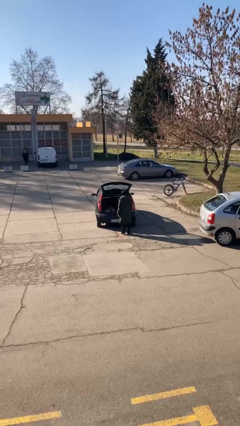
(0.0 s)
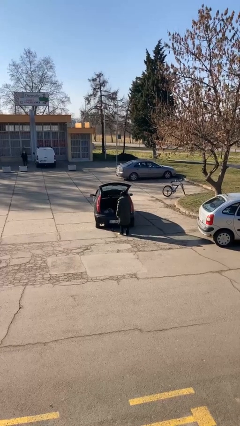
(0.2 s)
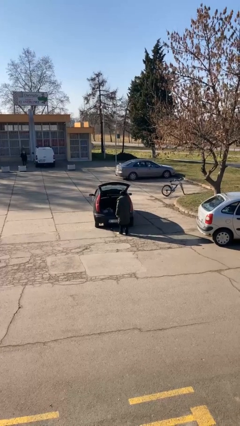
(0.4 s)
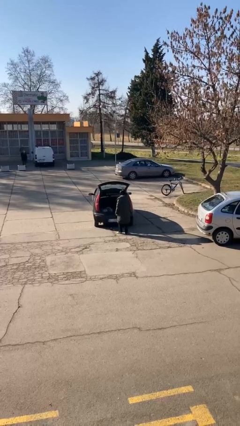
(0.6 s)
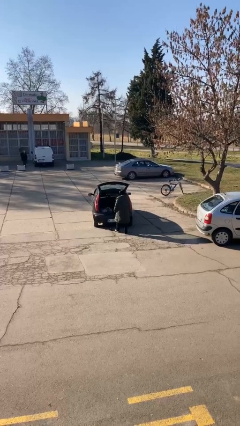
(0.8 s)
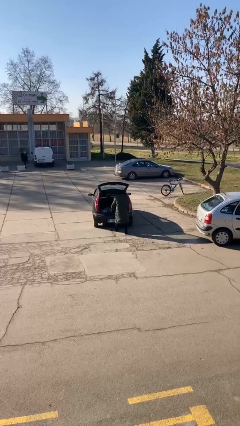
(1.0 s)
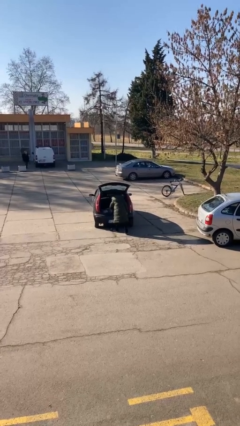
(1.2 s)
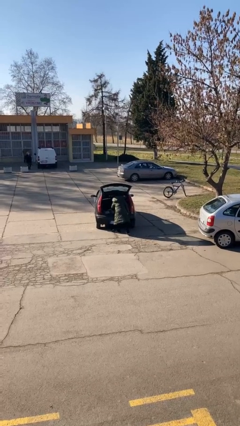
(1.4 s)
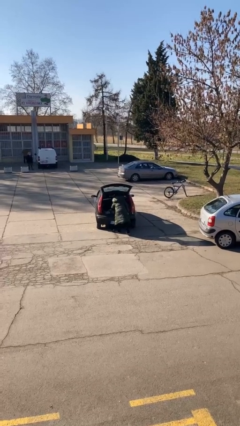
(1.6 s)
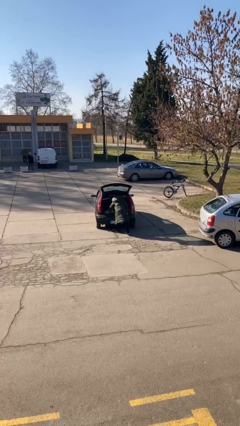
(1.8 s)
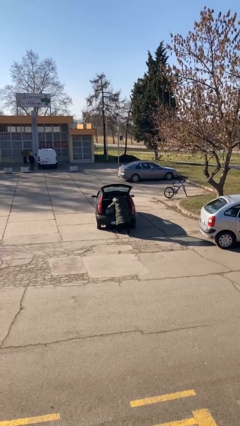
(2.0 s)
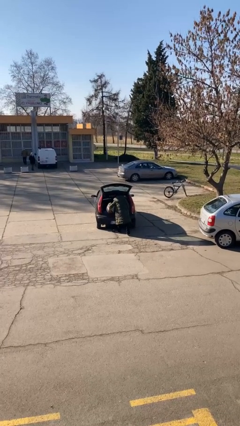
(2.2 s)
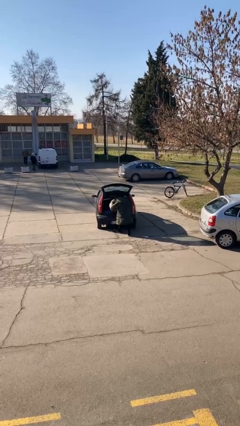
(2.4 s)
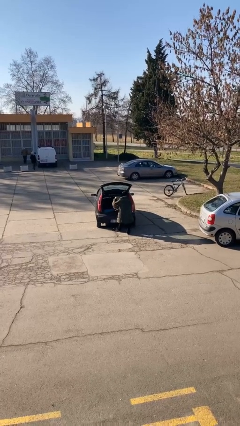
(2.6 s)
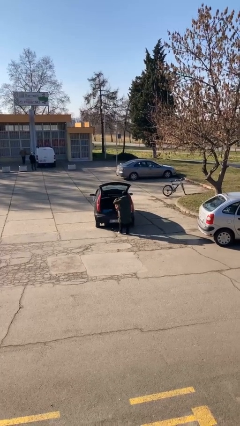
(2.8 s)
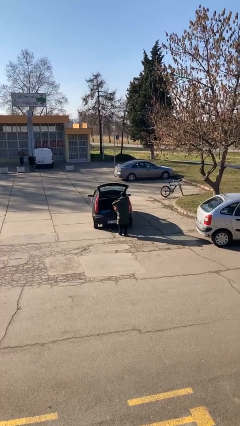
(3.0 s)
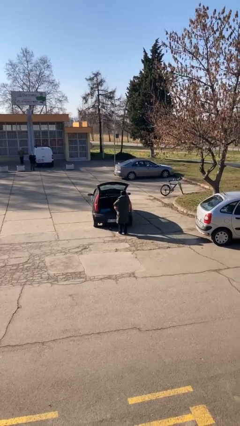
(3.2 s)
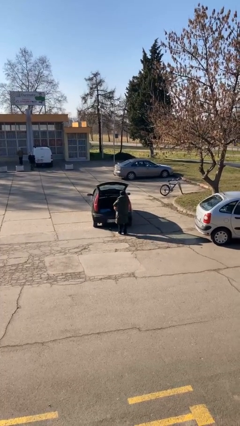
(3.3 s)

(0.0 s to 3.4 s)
person unloads car

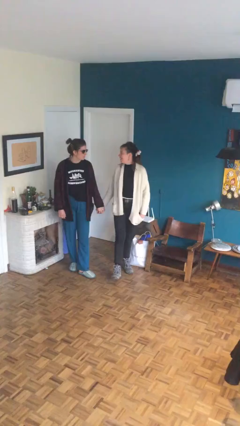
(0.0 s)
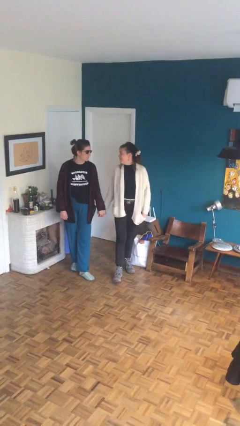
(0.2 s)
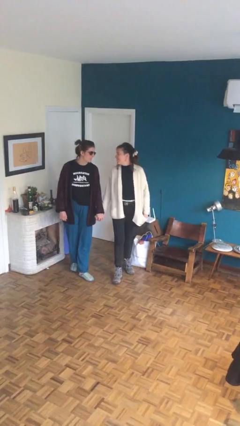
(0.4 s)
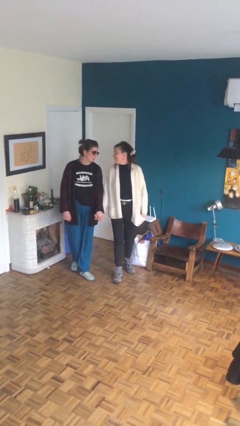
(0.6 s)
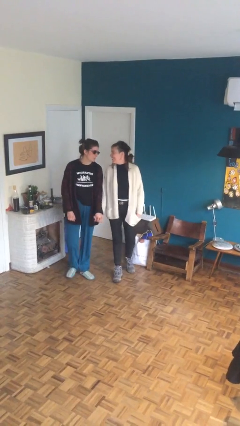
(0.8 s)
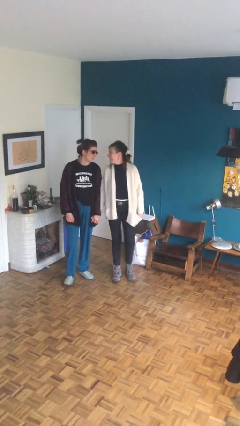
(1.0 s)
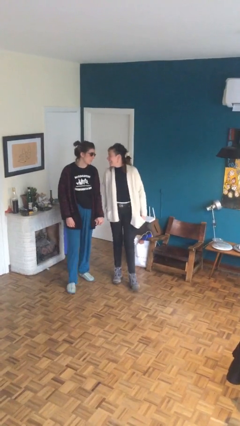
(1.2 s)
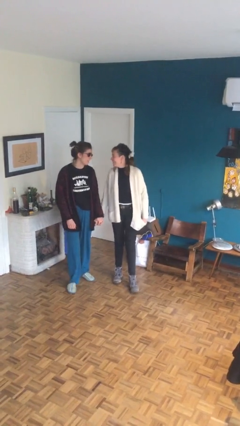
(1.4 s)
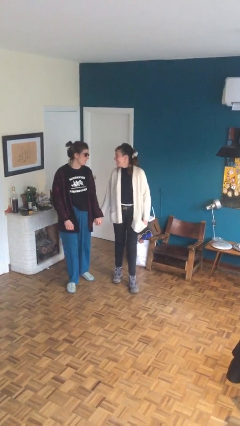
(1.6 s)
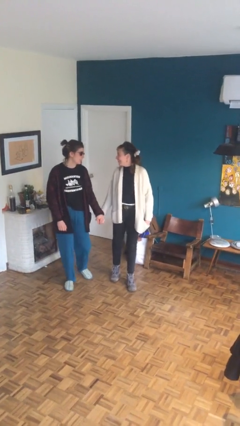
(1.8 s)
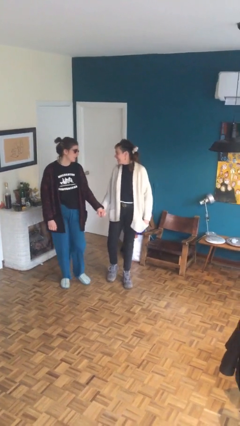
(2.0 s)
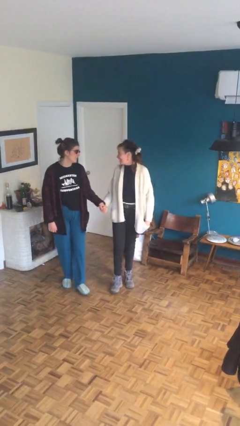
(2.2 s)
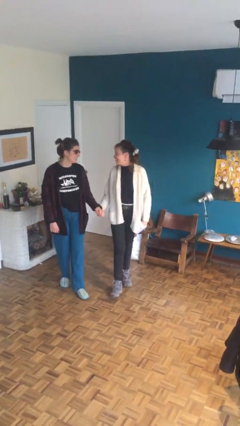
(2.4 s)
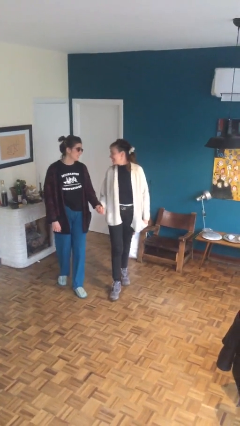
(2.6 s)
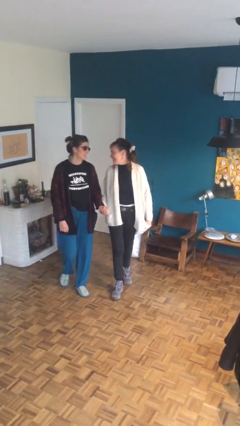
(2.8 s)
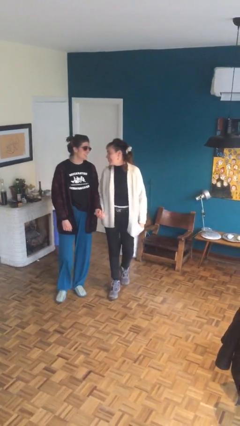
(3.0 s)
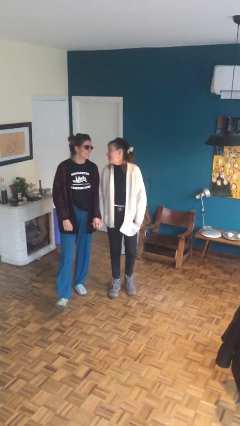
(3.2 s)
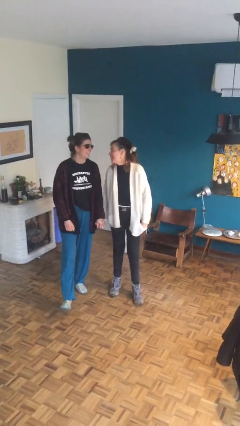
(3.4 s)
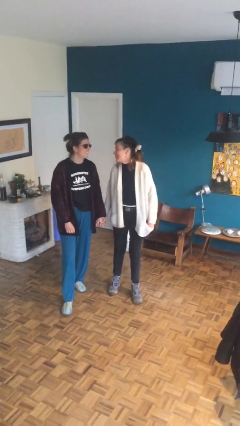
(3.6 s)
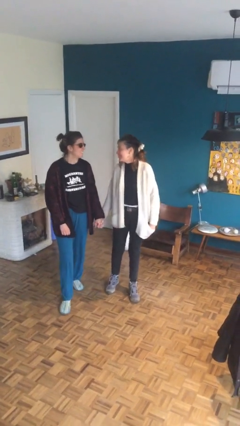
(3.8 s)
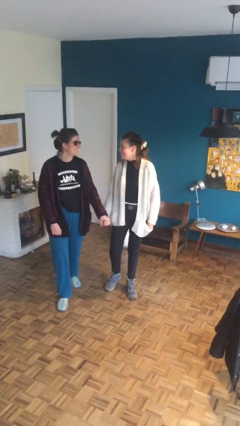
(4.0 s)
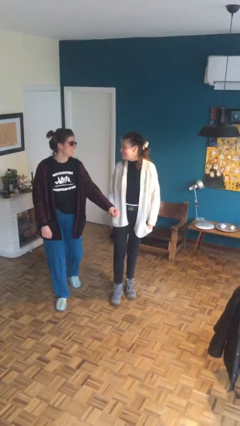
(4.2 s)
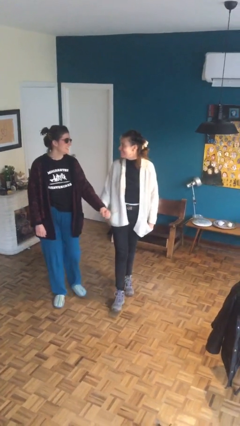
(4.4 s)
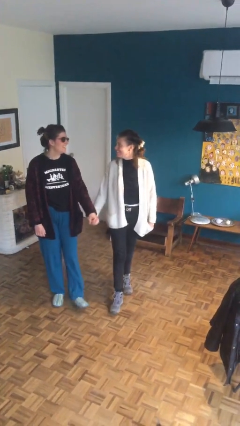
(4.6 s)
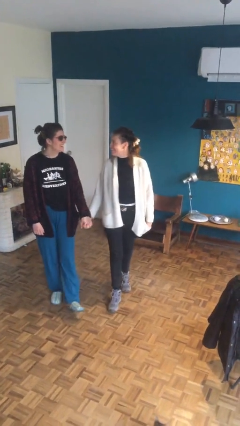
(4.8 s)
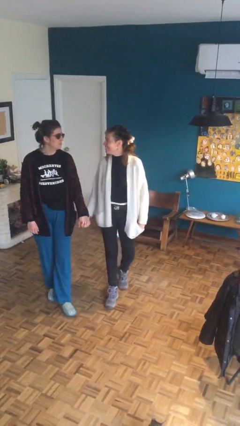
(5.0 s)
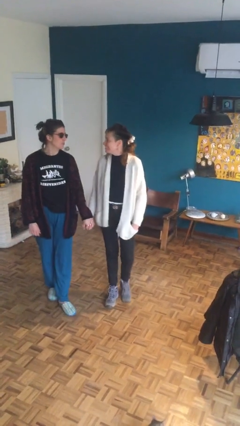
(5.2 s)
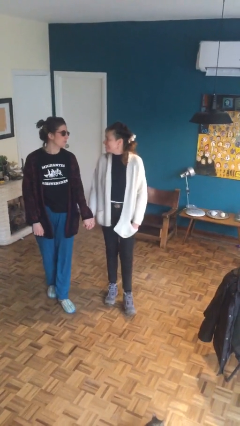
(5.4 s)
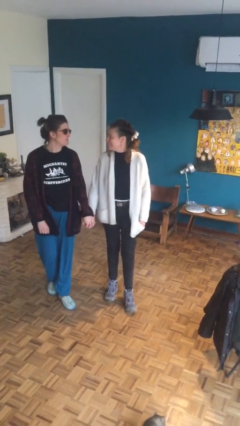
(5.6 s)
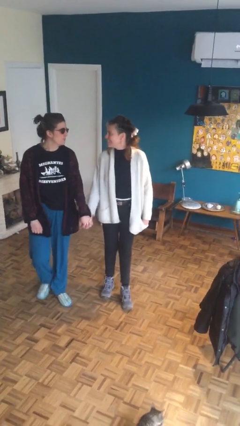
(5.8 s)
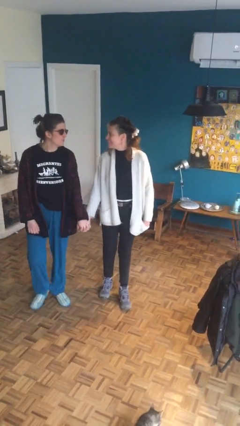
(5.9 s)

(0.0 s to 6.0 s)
person holds hand

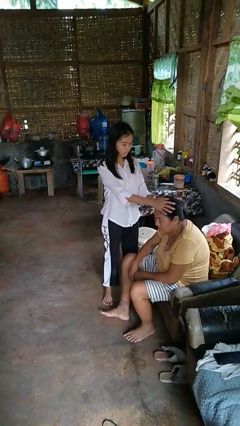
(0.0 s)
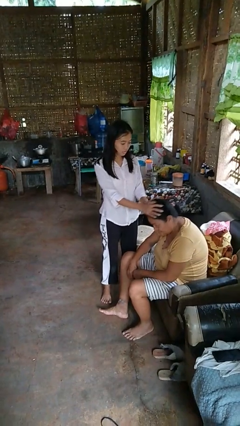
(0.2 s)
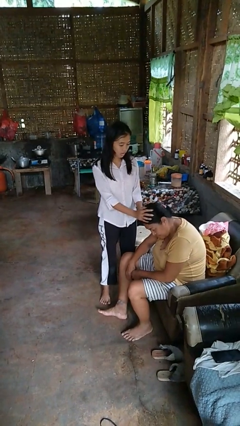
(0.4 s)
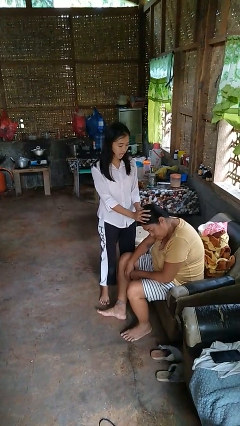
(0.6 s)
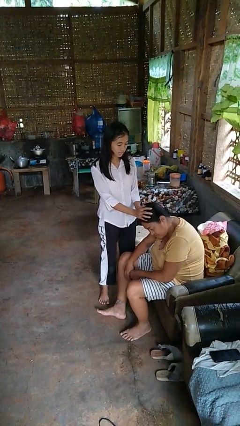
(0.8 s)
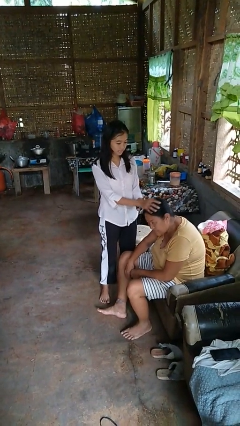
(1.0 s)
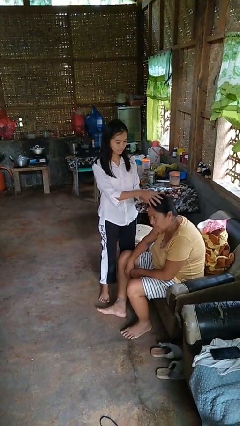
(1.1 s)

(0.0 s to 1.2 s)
person grabs person by hair

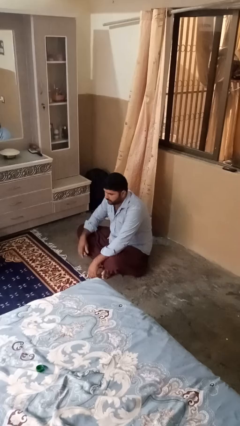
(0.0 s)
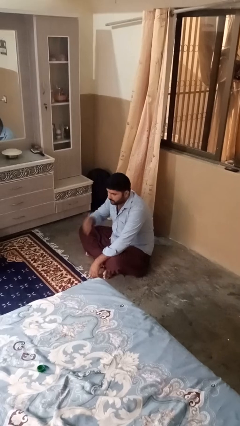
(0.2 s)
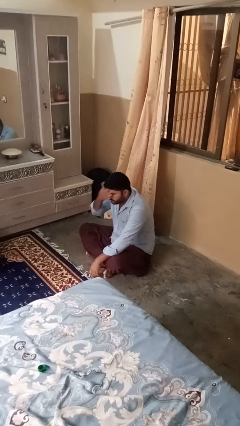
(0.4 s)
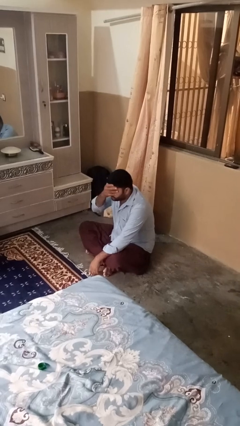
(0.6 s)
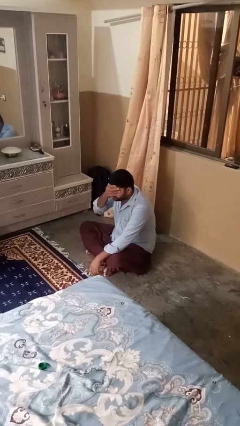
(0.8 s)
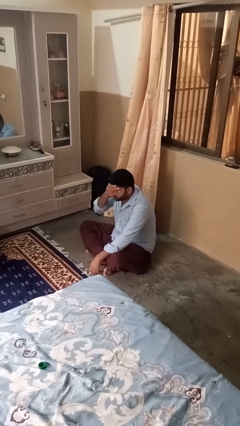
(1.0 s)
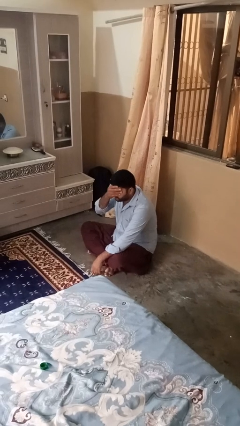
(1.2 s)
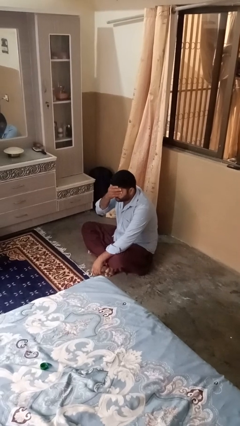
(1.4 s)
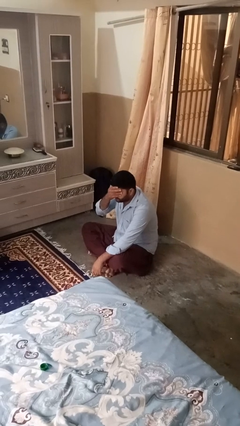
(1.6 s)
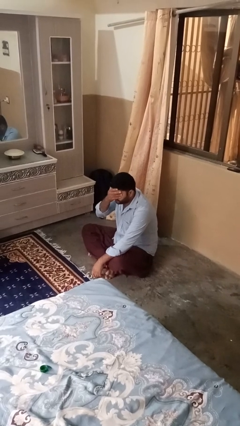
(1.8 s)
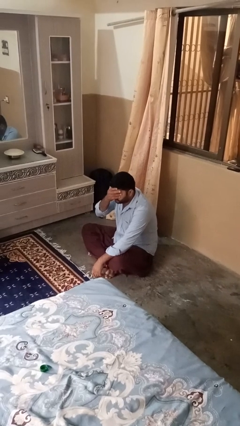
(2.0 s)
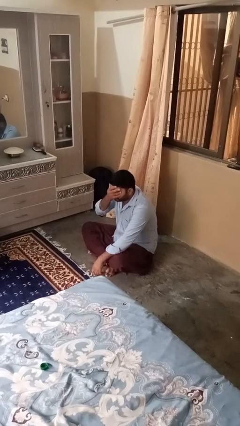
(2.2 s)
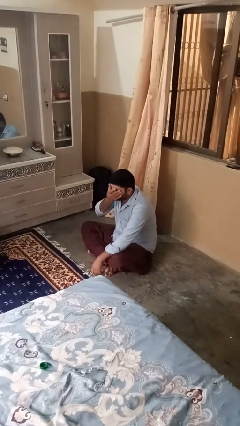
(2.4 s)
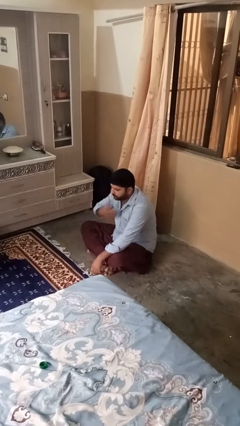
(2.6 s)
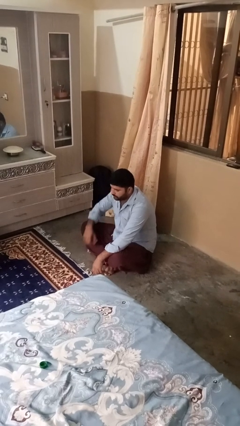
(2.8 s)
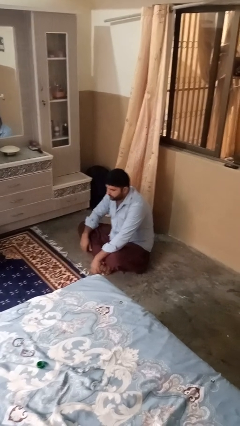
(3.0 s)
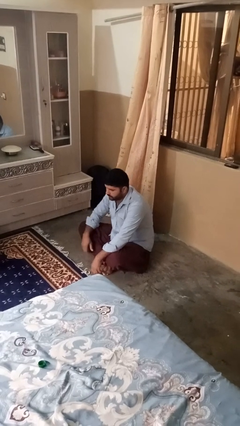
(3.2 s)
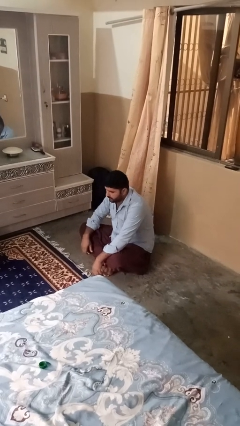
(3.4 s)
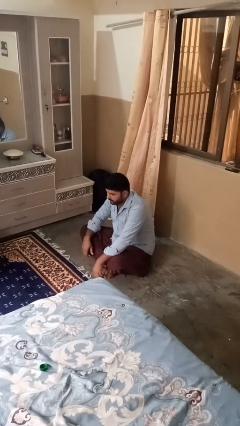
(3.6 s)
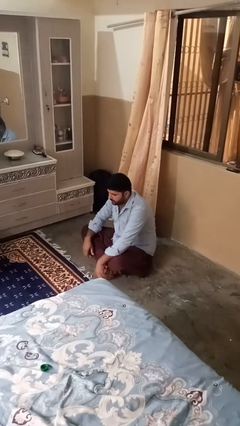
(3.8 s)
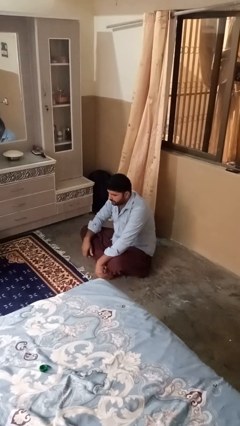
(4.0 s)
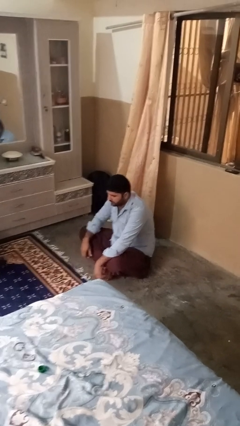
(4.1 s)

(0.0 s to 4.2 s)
person covers face with hands

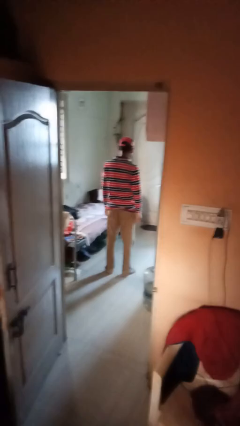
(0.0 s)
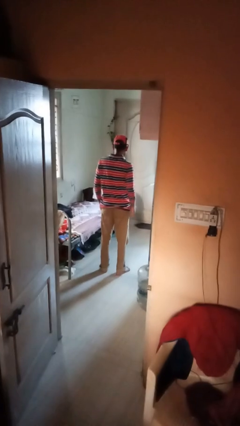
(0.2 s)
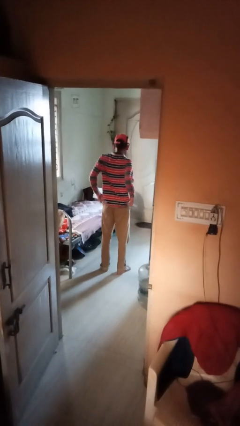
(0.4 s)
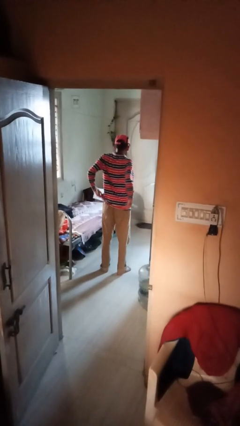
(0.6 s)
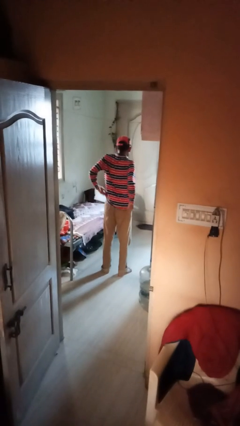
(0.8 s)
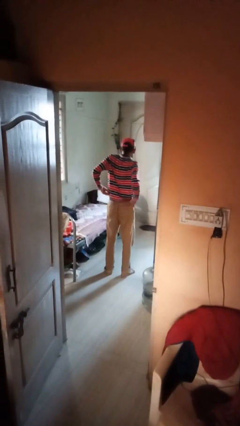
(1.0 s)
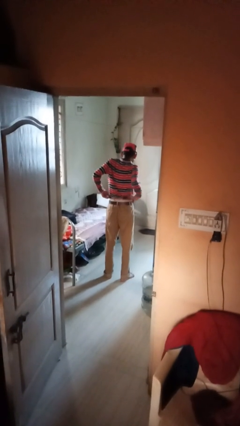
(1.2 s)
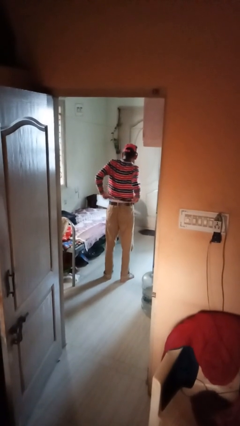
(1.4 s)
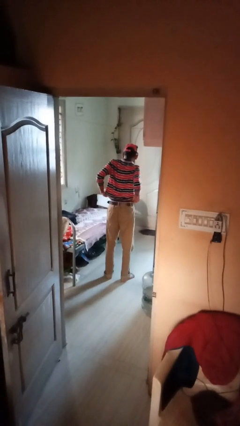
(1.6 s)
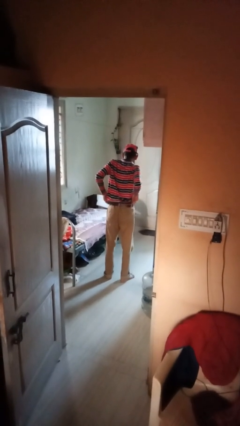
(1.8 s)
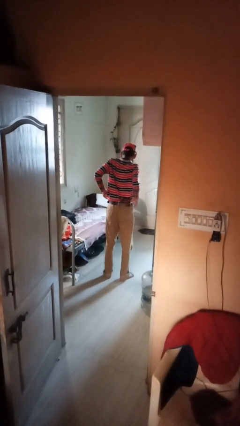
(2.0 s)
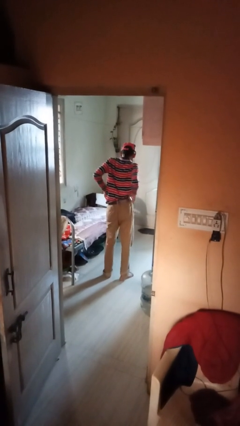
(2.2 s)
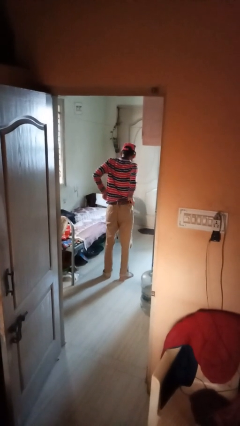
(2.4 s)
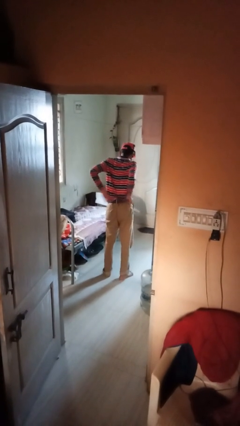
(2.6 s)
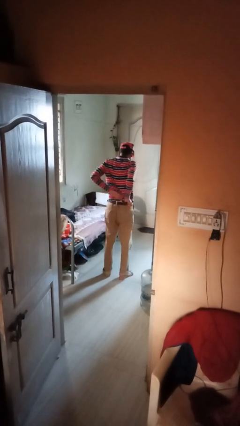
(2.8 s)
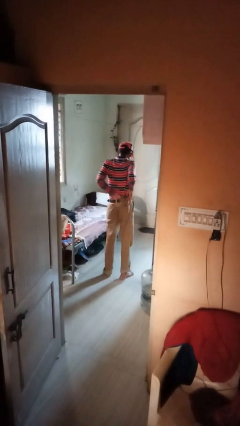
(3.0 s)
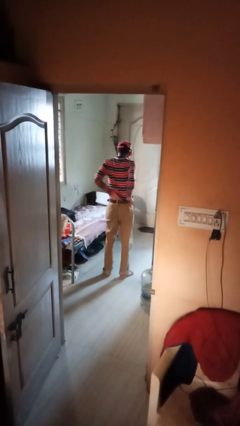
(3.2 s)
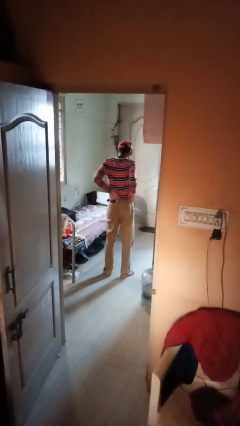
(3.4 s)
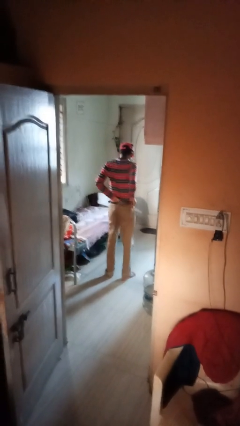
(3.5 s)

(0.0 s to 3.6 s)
person tucks in shirt
